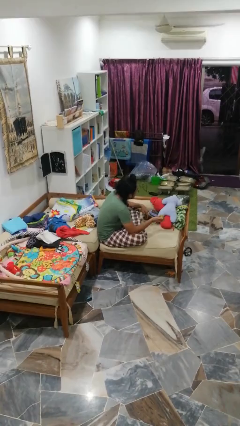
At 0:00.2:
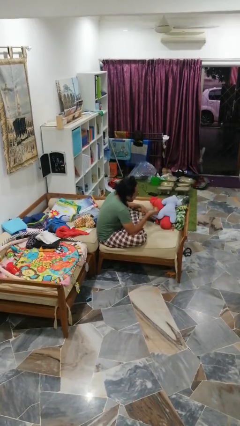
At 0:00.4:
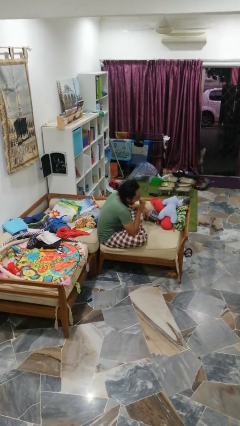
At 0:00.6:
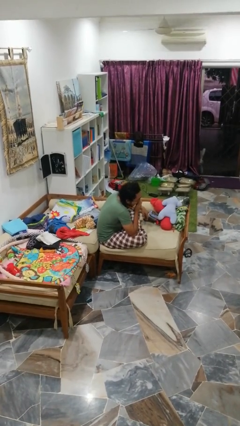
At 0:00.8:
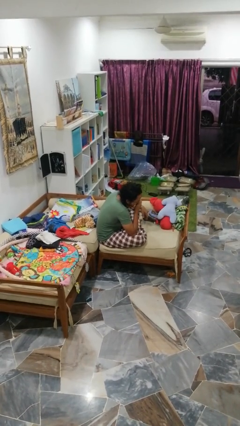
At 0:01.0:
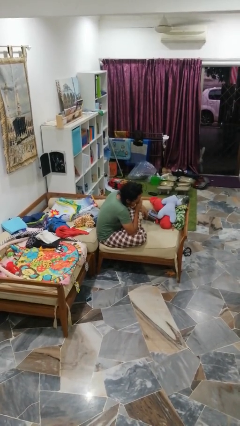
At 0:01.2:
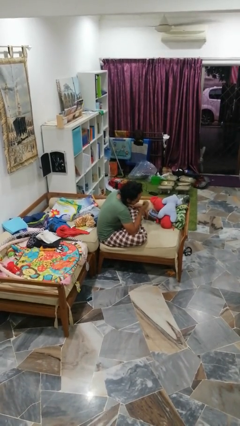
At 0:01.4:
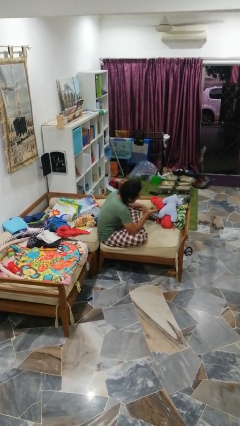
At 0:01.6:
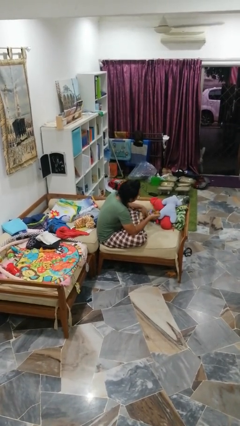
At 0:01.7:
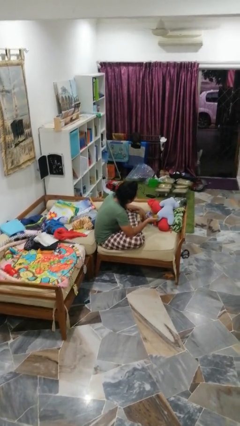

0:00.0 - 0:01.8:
person eats apple

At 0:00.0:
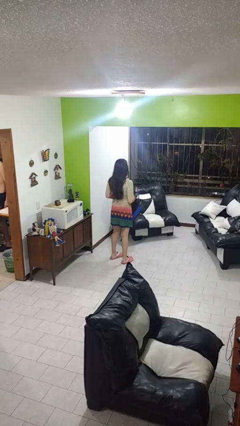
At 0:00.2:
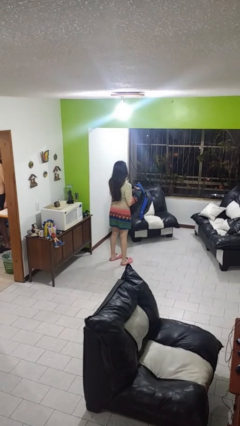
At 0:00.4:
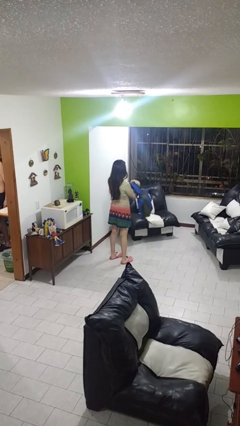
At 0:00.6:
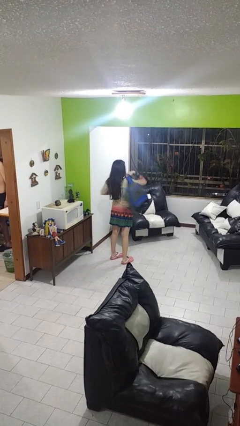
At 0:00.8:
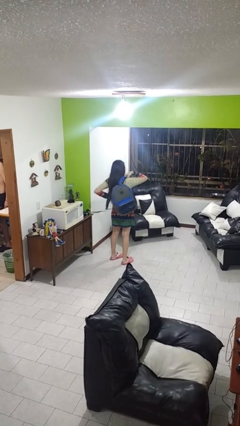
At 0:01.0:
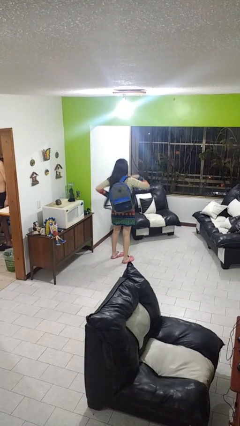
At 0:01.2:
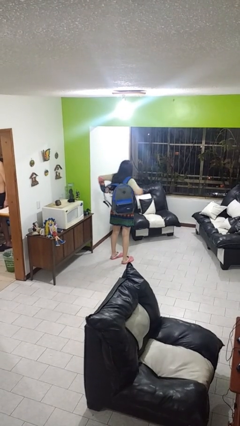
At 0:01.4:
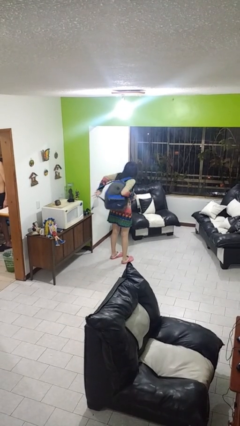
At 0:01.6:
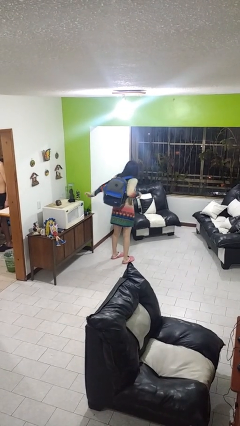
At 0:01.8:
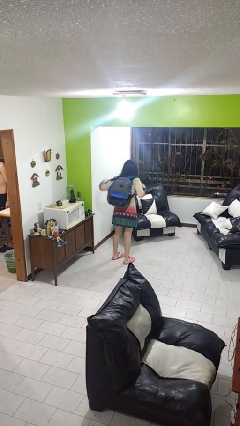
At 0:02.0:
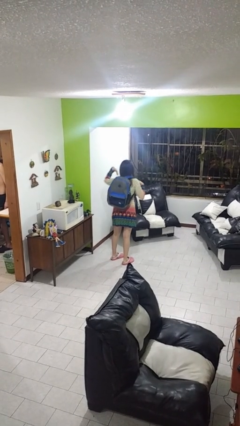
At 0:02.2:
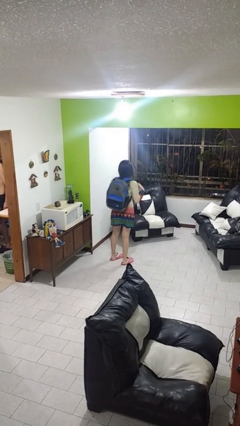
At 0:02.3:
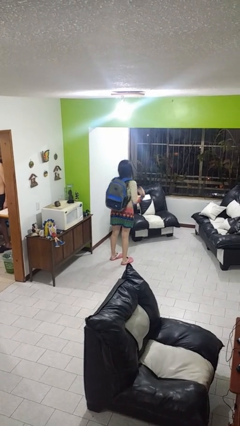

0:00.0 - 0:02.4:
person puts on backpack

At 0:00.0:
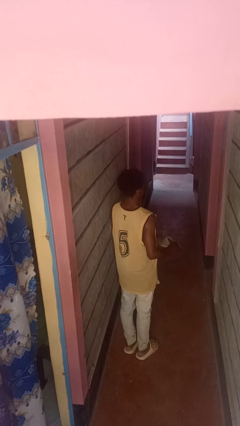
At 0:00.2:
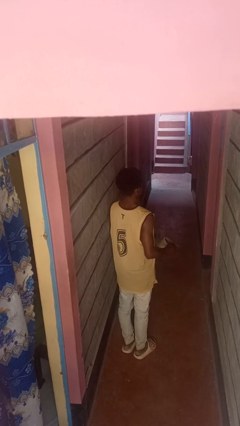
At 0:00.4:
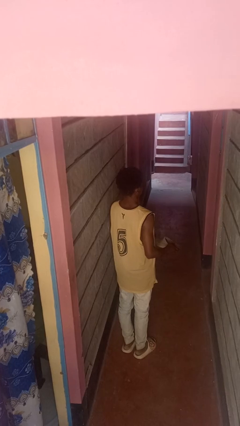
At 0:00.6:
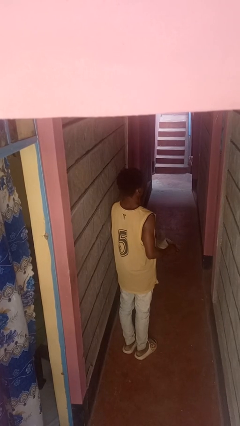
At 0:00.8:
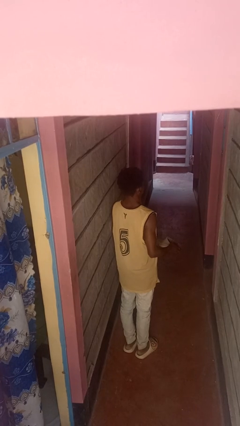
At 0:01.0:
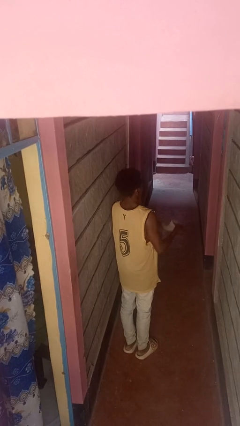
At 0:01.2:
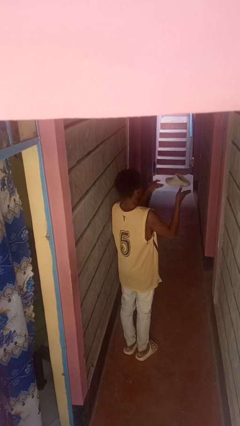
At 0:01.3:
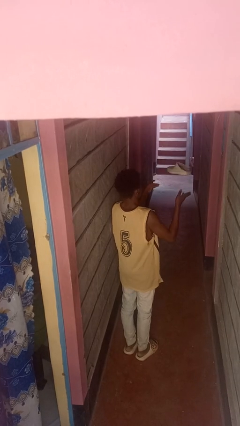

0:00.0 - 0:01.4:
person throws object into air

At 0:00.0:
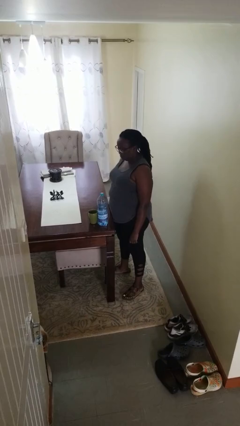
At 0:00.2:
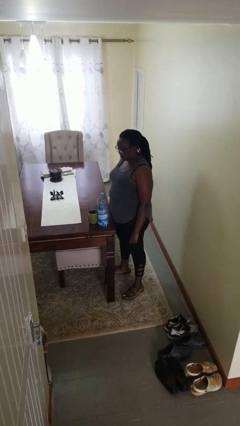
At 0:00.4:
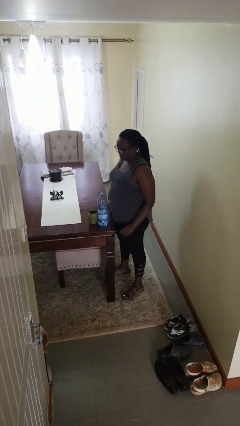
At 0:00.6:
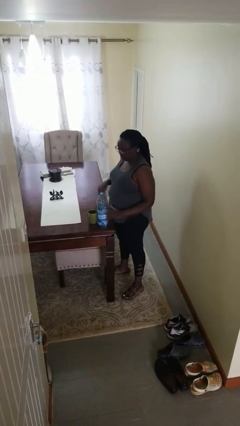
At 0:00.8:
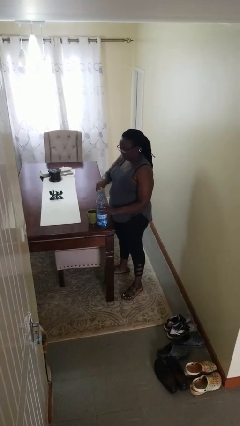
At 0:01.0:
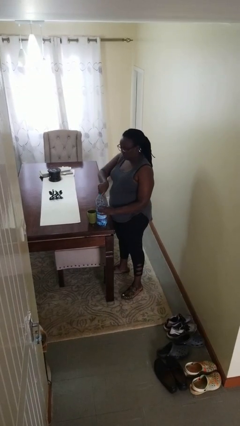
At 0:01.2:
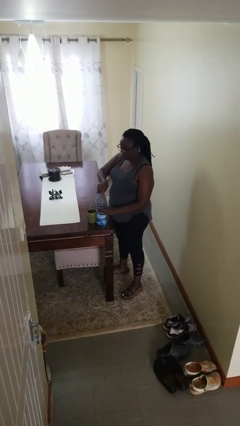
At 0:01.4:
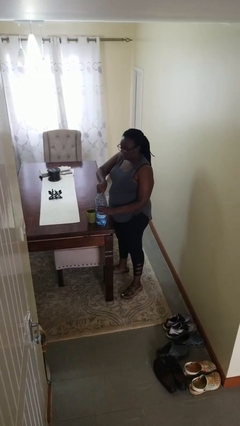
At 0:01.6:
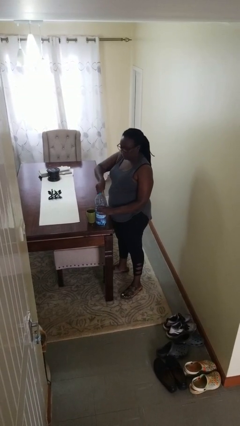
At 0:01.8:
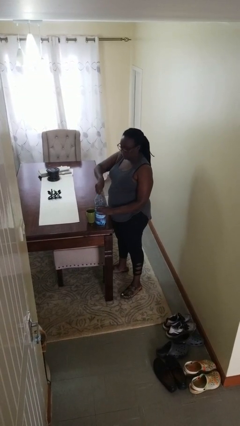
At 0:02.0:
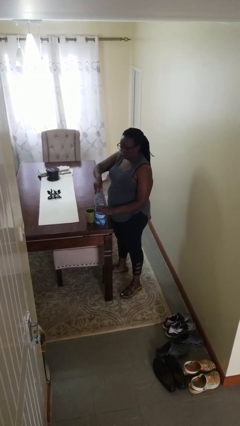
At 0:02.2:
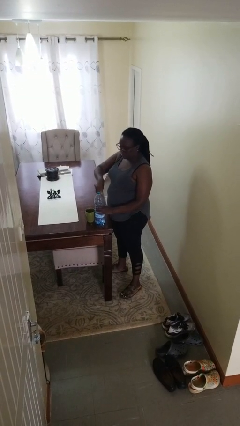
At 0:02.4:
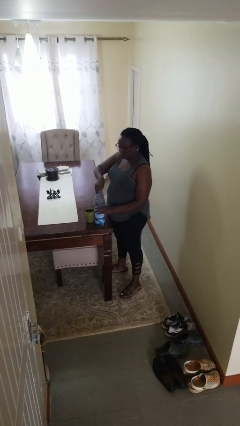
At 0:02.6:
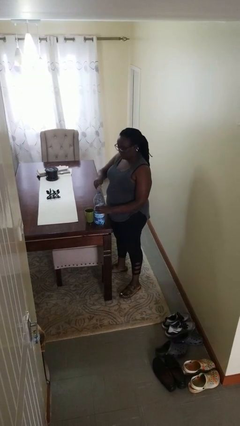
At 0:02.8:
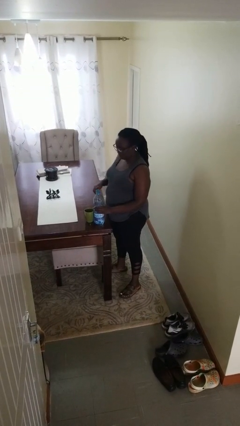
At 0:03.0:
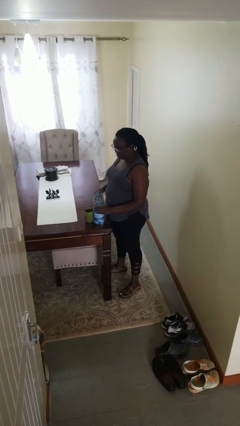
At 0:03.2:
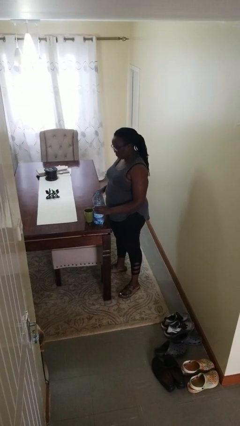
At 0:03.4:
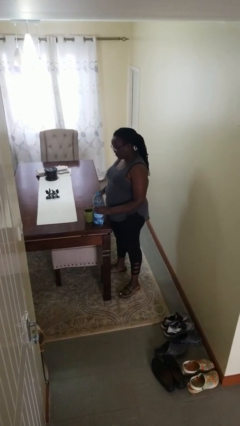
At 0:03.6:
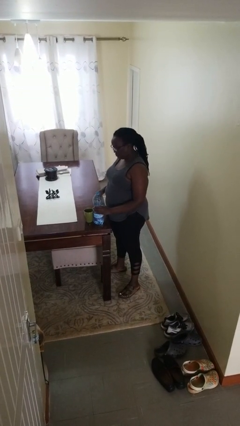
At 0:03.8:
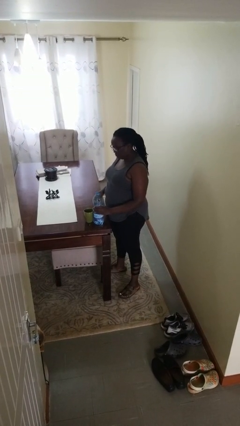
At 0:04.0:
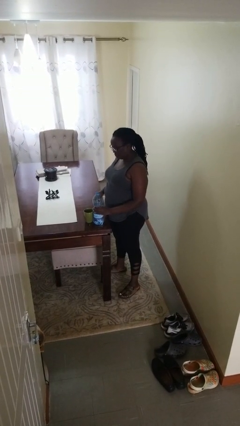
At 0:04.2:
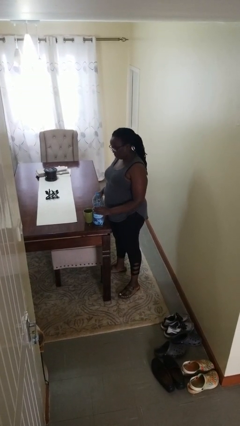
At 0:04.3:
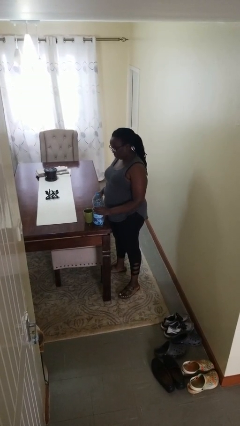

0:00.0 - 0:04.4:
person unscrews lid from bottle

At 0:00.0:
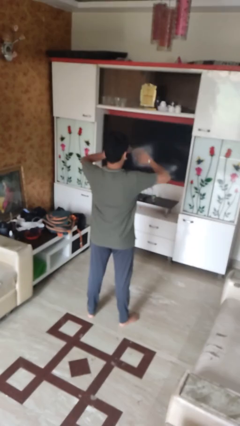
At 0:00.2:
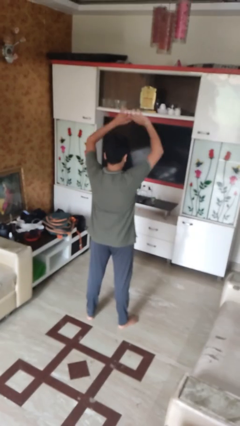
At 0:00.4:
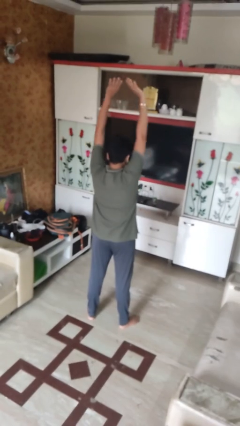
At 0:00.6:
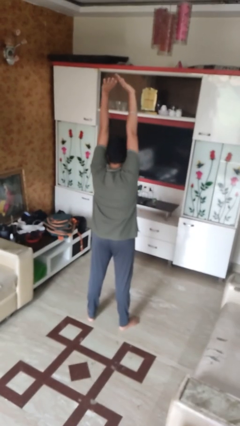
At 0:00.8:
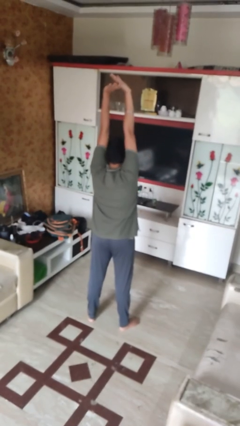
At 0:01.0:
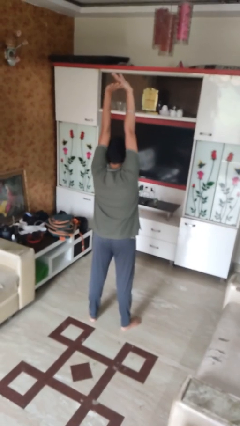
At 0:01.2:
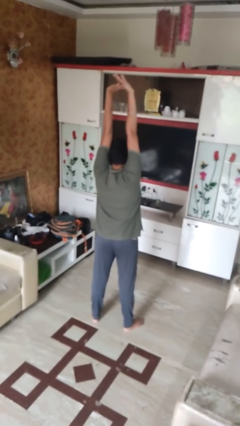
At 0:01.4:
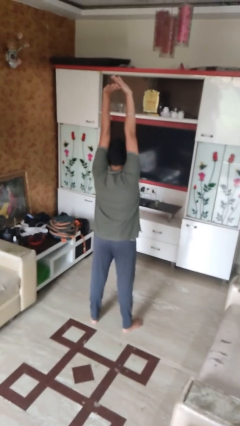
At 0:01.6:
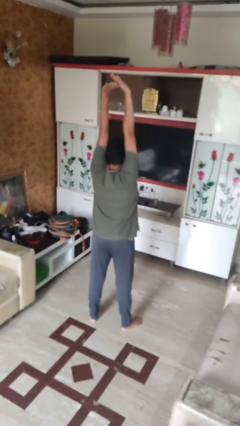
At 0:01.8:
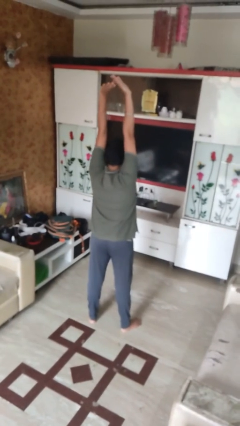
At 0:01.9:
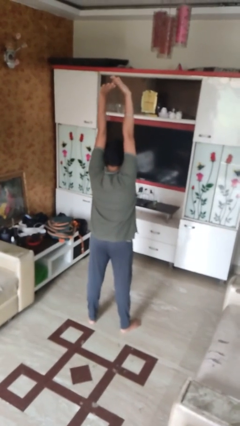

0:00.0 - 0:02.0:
person stretches arms over head

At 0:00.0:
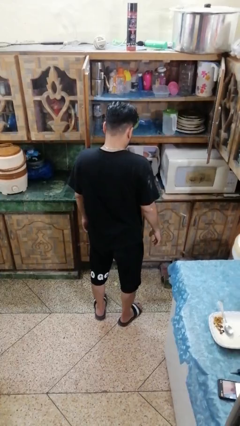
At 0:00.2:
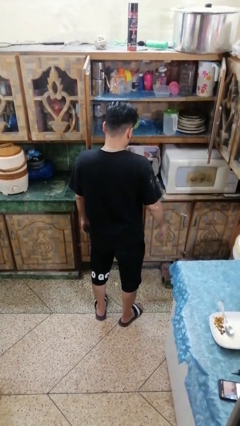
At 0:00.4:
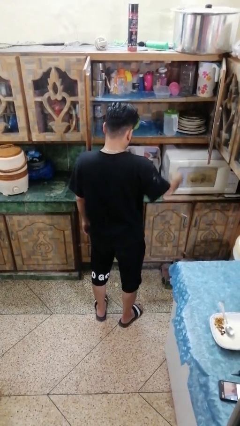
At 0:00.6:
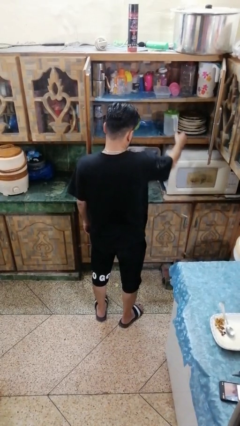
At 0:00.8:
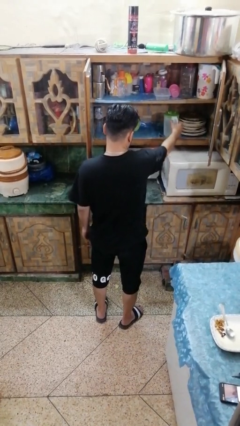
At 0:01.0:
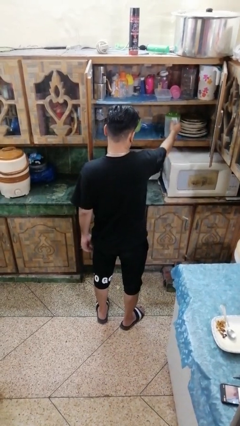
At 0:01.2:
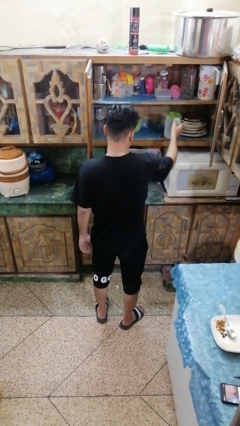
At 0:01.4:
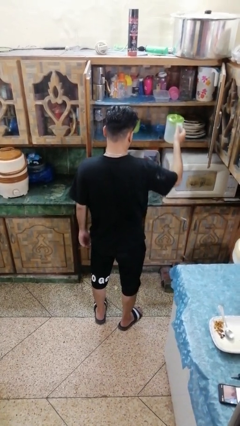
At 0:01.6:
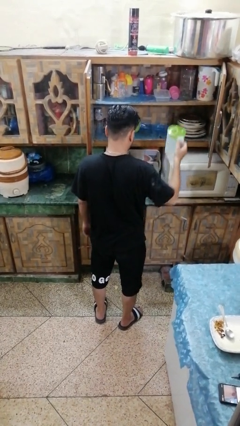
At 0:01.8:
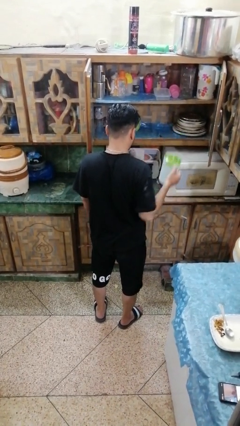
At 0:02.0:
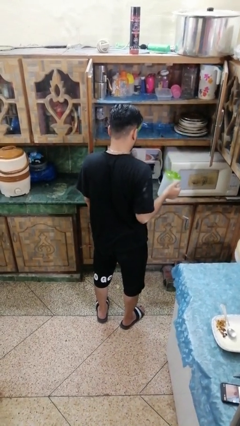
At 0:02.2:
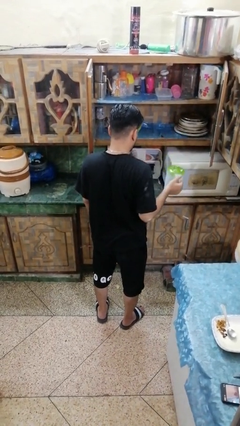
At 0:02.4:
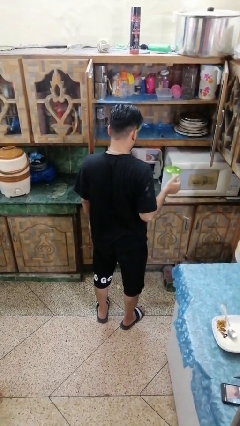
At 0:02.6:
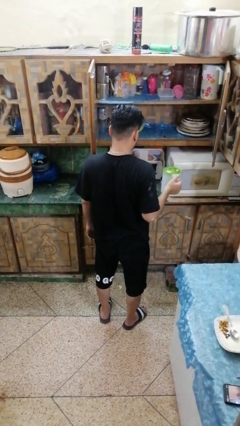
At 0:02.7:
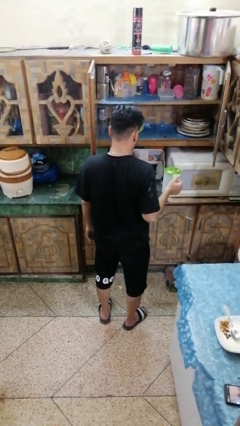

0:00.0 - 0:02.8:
person picks up object from cabinet

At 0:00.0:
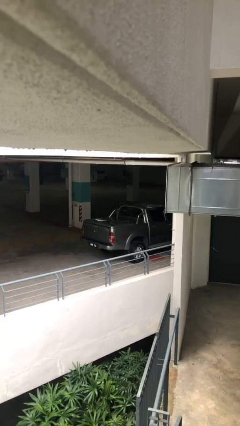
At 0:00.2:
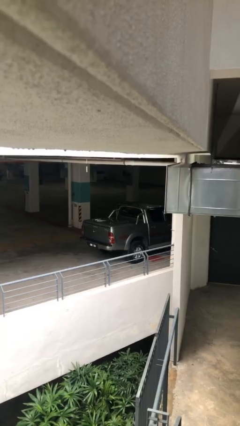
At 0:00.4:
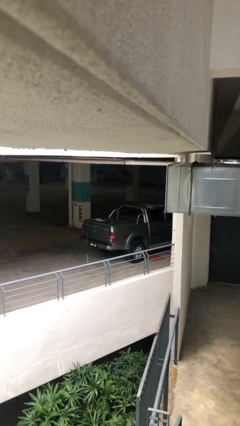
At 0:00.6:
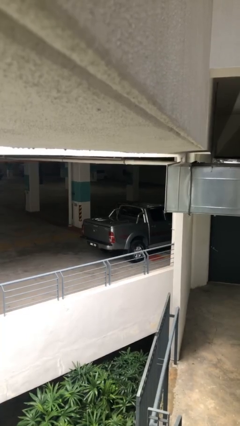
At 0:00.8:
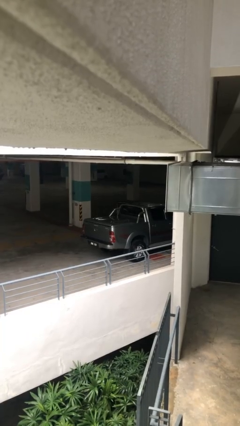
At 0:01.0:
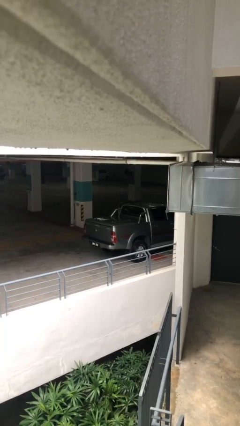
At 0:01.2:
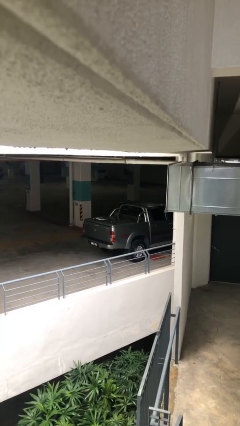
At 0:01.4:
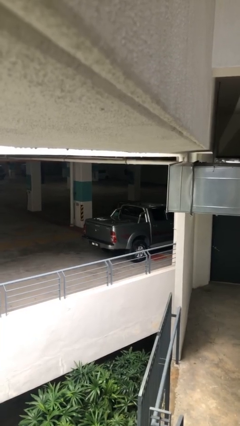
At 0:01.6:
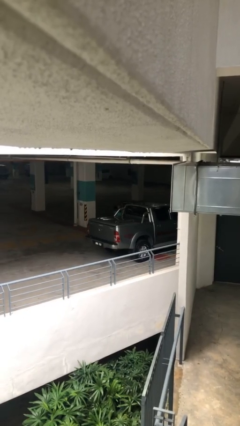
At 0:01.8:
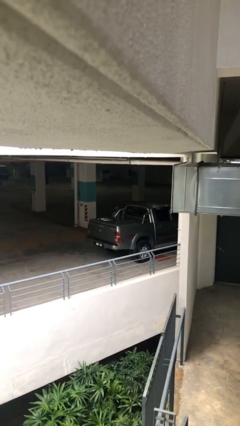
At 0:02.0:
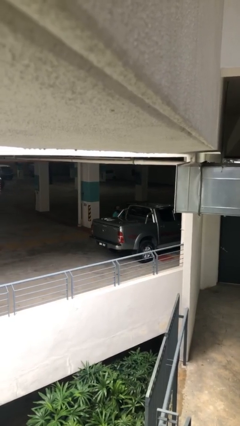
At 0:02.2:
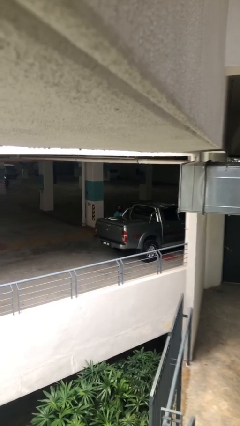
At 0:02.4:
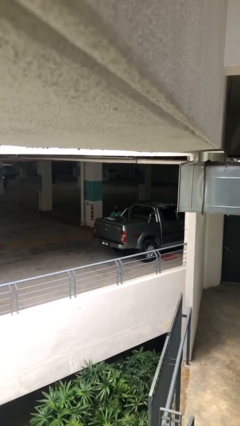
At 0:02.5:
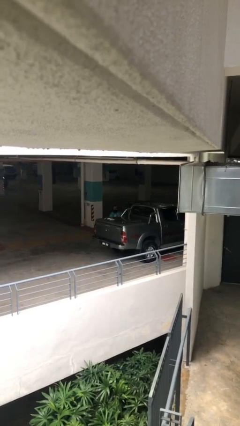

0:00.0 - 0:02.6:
person exits car
